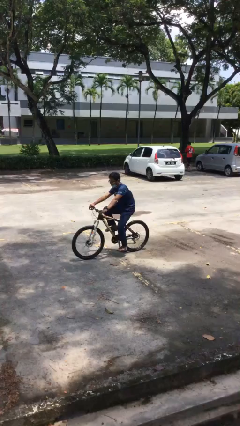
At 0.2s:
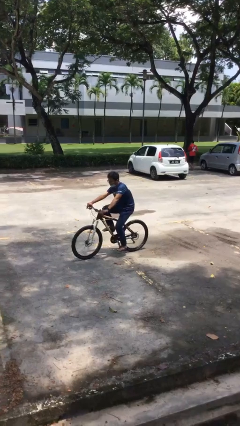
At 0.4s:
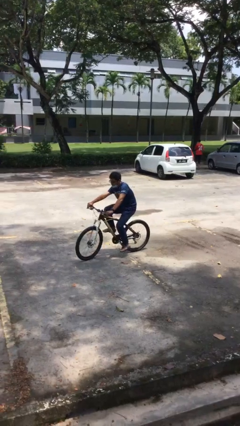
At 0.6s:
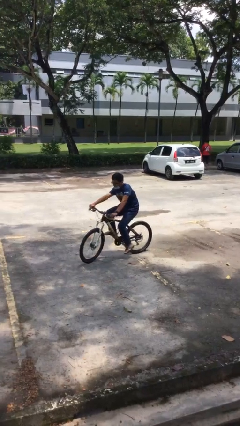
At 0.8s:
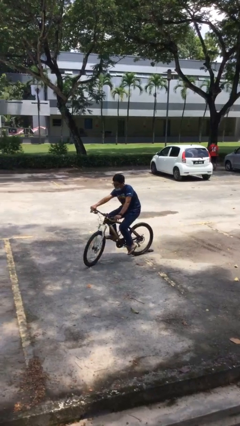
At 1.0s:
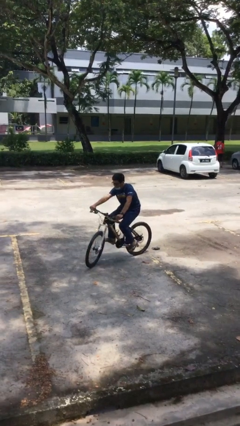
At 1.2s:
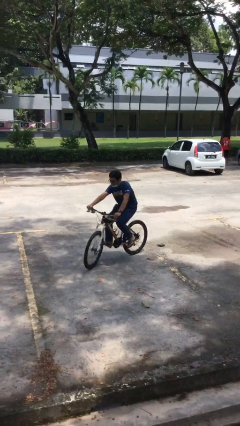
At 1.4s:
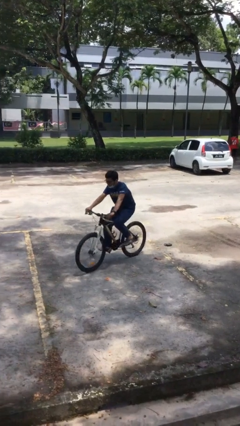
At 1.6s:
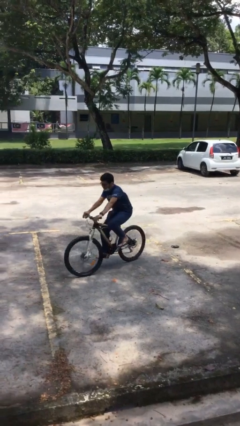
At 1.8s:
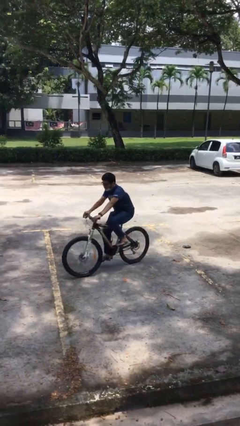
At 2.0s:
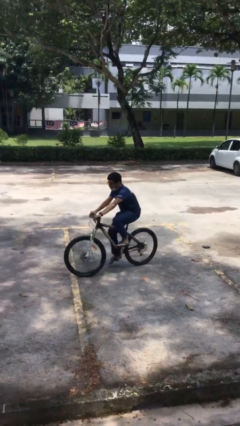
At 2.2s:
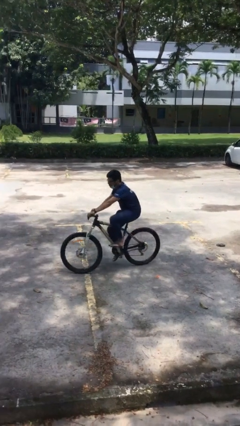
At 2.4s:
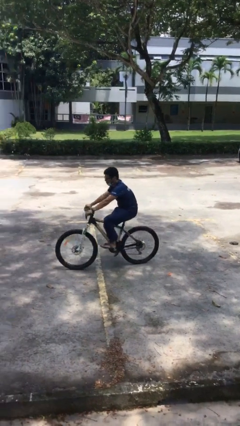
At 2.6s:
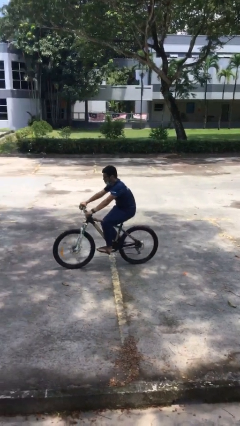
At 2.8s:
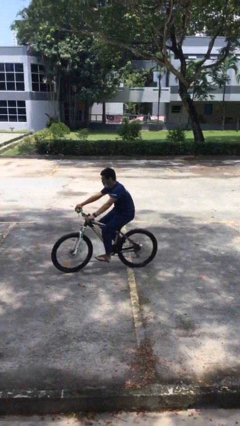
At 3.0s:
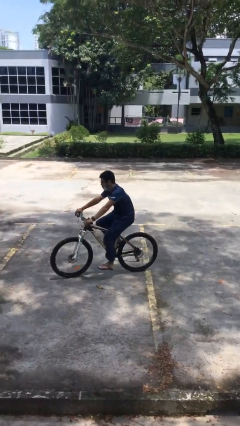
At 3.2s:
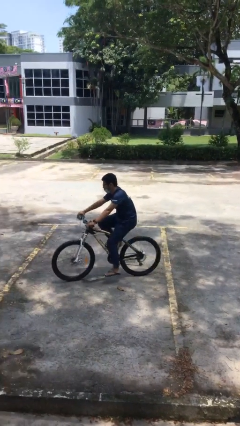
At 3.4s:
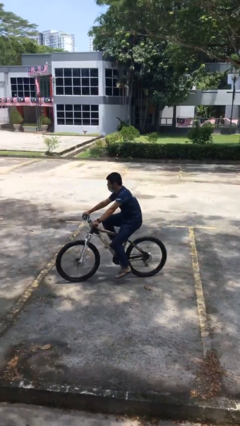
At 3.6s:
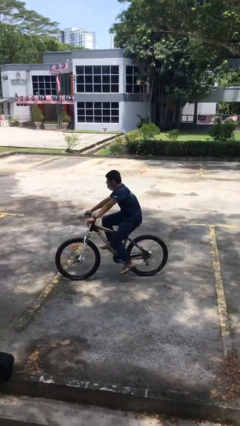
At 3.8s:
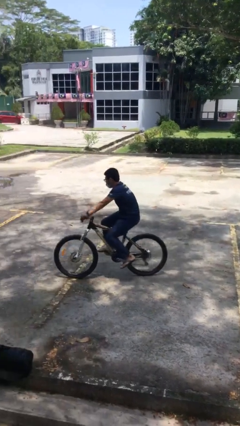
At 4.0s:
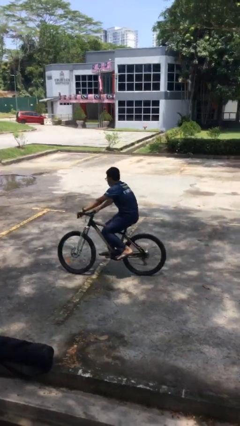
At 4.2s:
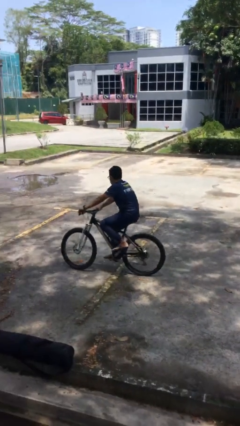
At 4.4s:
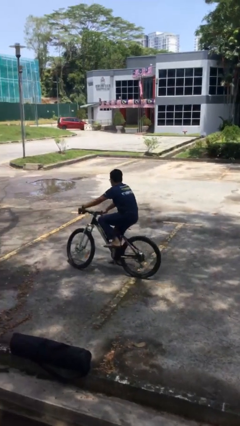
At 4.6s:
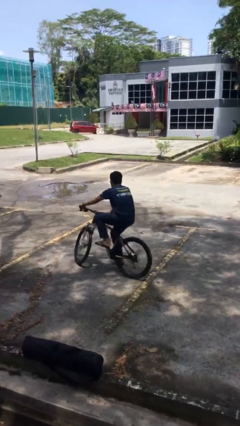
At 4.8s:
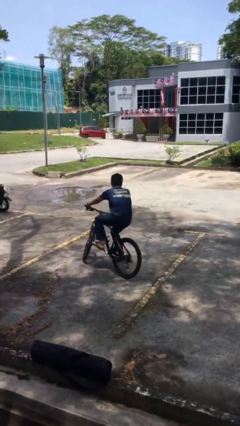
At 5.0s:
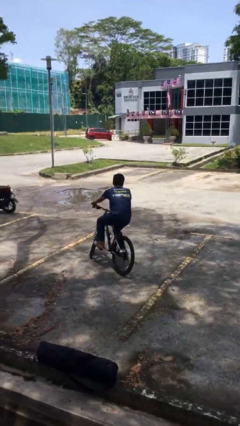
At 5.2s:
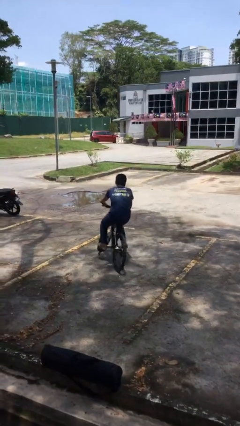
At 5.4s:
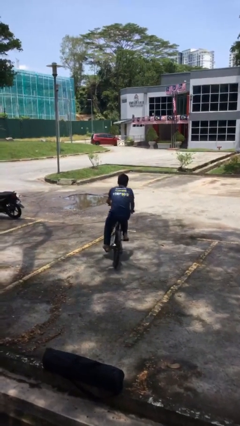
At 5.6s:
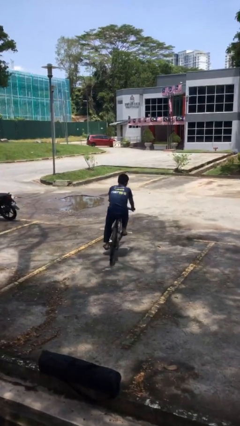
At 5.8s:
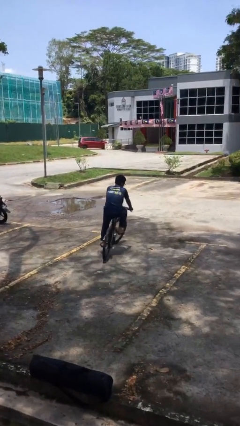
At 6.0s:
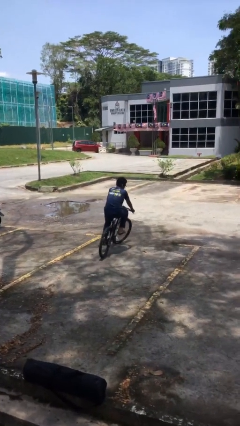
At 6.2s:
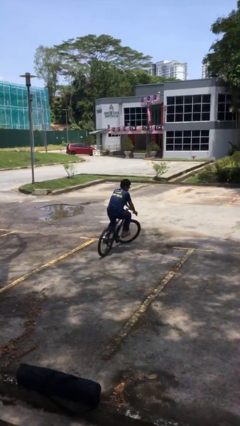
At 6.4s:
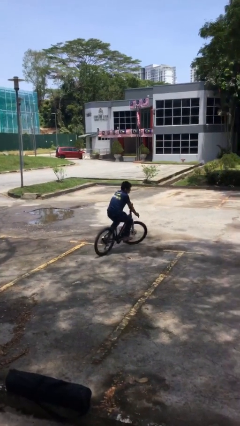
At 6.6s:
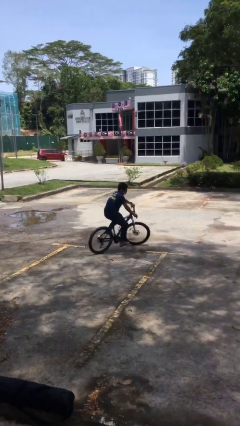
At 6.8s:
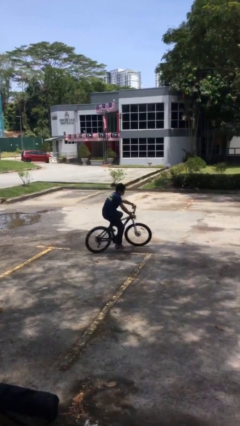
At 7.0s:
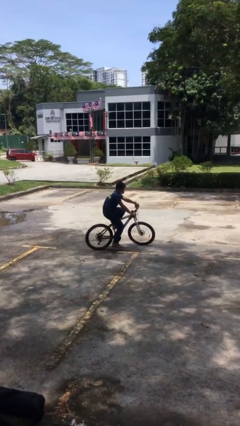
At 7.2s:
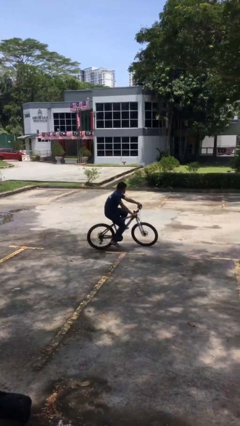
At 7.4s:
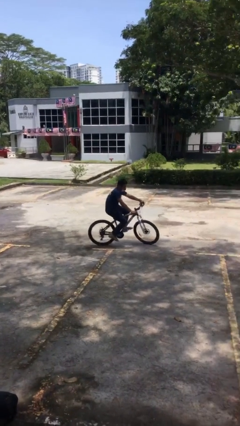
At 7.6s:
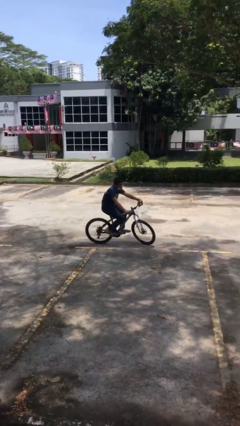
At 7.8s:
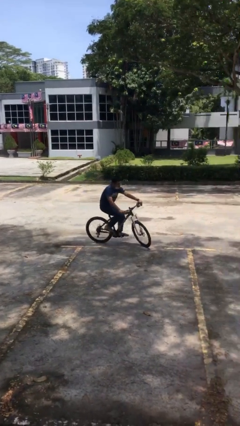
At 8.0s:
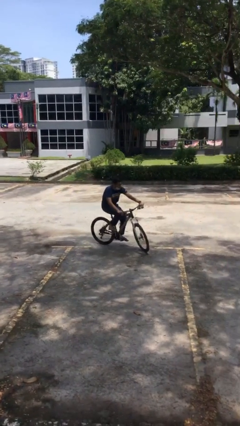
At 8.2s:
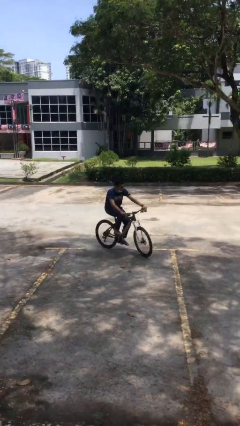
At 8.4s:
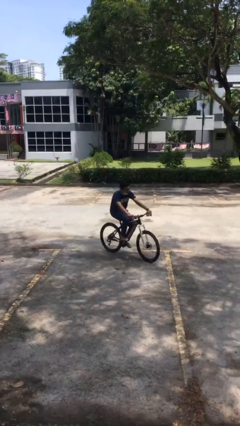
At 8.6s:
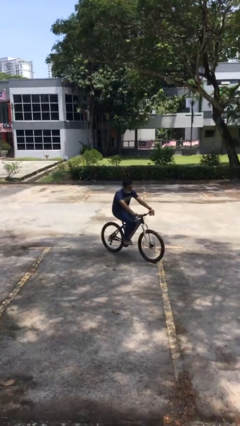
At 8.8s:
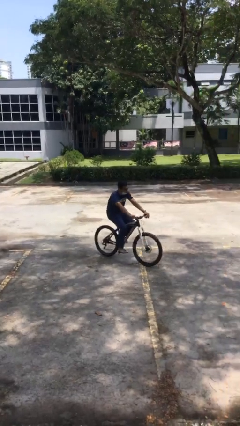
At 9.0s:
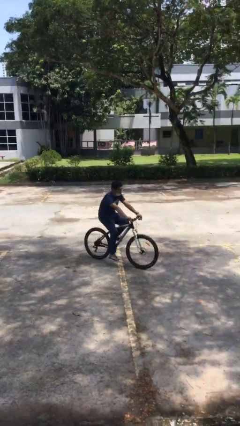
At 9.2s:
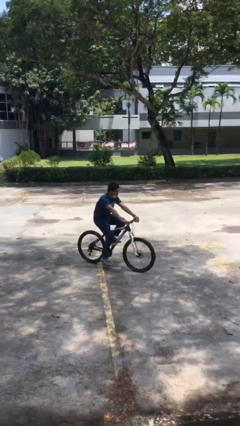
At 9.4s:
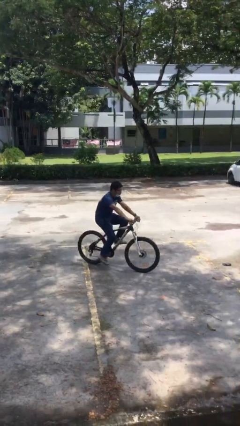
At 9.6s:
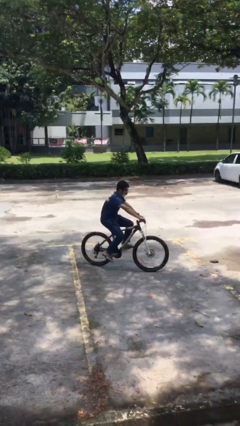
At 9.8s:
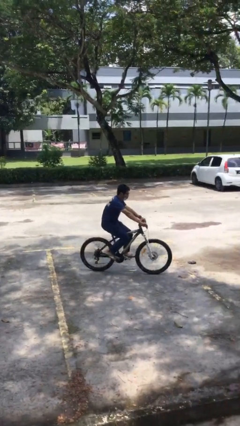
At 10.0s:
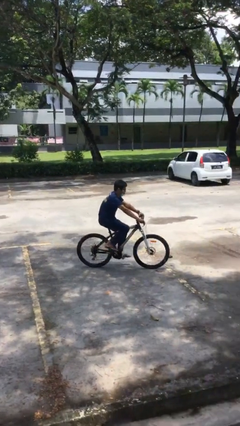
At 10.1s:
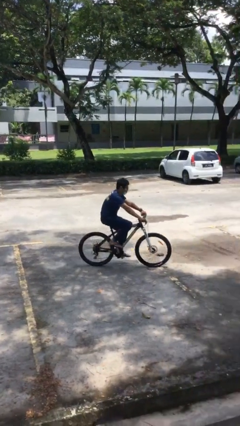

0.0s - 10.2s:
person rides bicycle

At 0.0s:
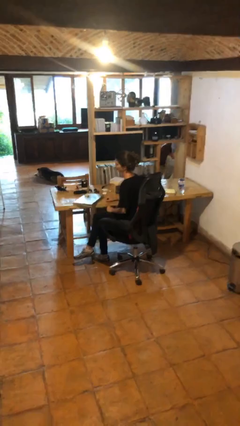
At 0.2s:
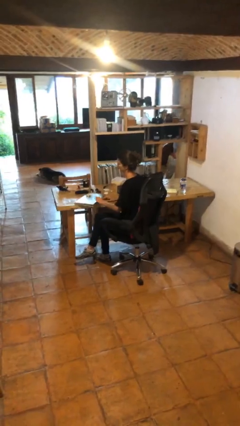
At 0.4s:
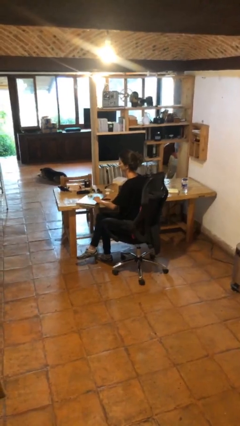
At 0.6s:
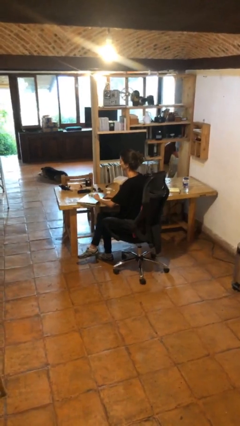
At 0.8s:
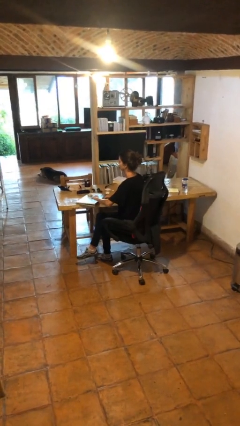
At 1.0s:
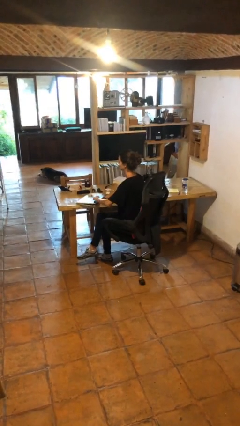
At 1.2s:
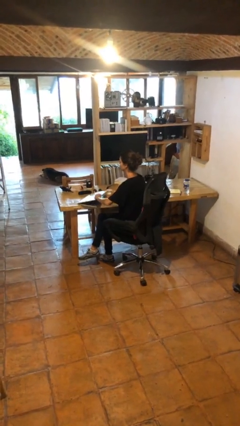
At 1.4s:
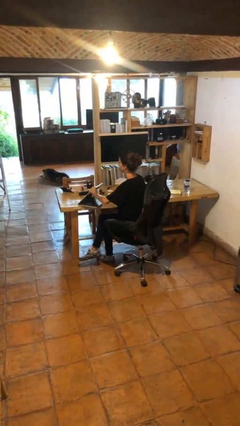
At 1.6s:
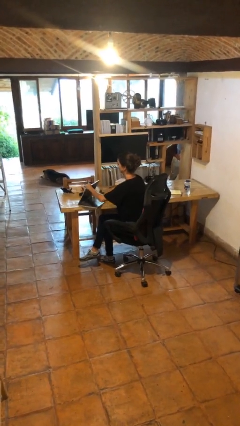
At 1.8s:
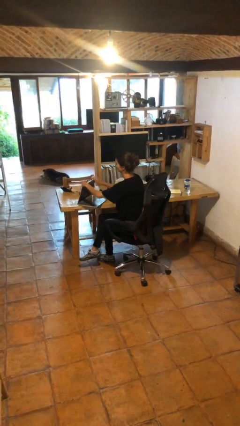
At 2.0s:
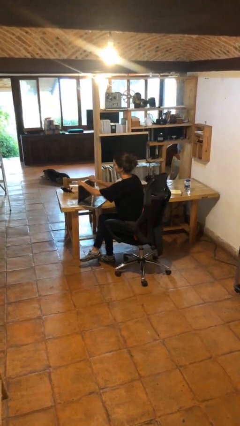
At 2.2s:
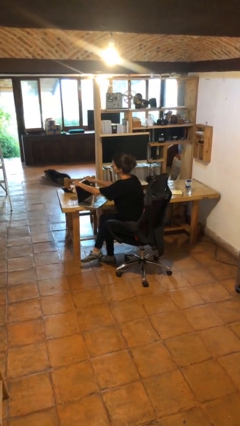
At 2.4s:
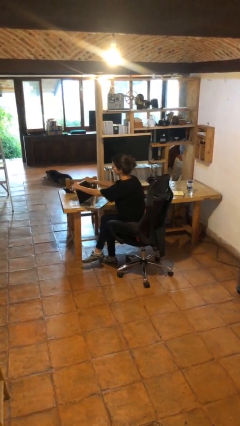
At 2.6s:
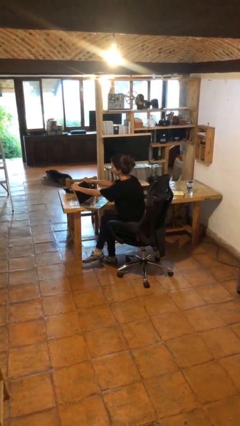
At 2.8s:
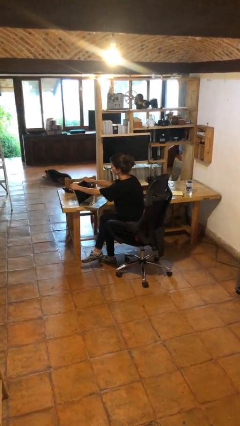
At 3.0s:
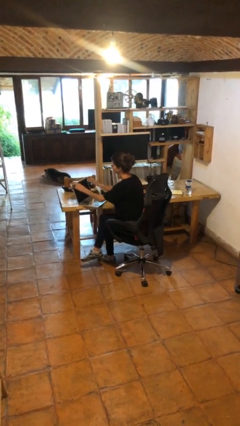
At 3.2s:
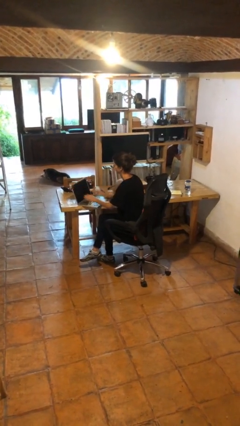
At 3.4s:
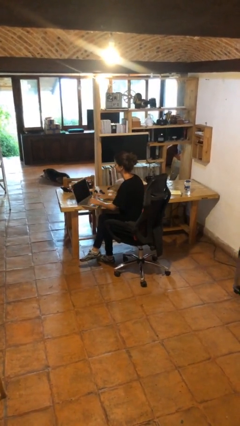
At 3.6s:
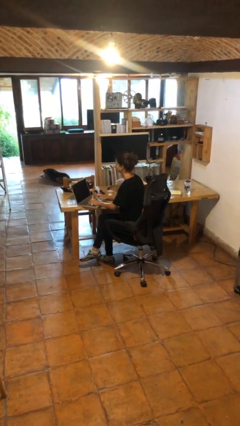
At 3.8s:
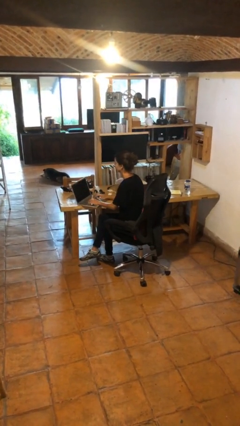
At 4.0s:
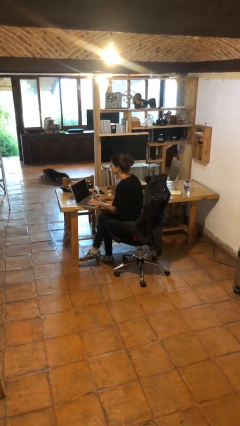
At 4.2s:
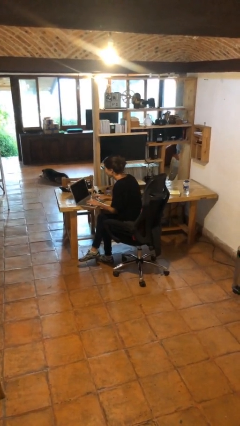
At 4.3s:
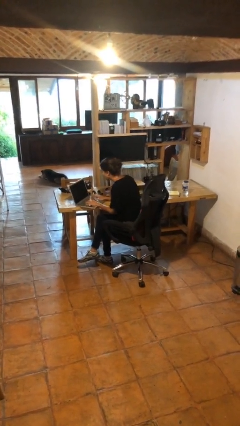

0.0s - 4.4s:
person opens laptop

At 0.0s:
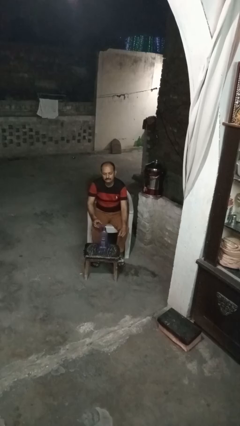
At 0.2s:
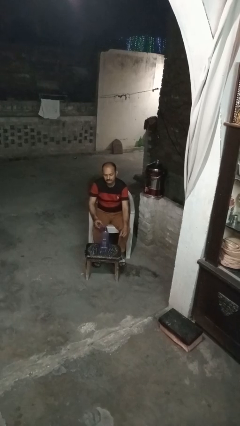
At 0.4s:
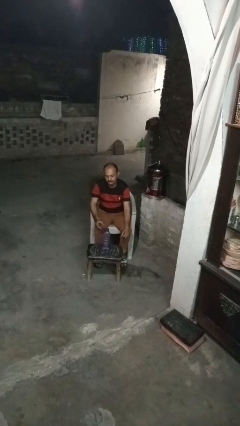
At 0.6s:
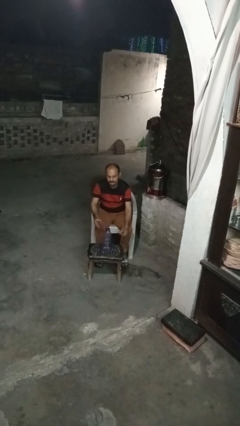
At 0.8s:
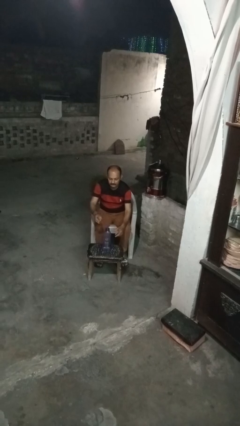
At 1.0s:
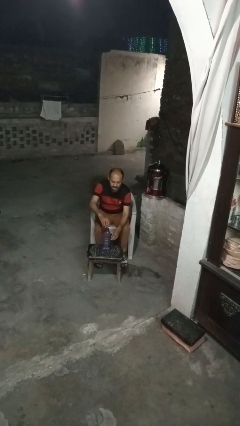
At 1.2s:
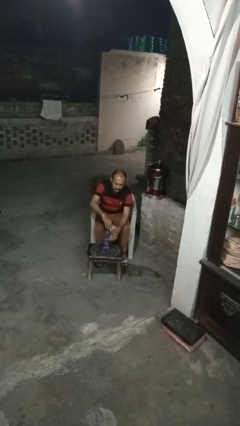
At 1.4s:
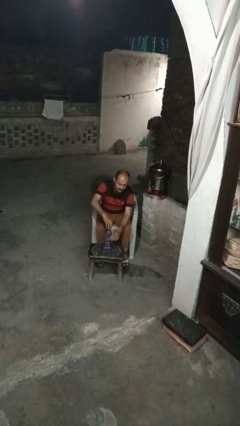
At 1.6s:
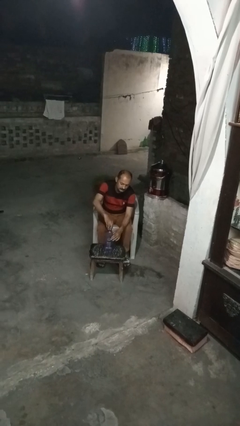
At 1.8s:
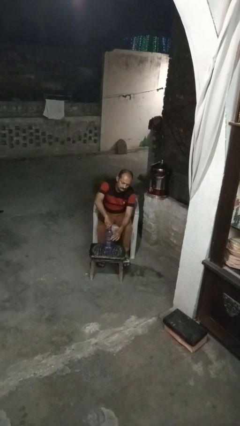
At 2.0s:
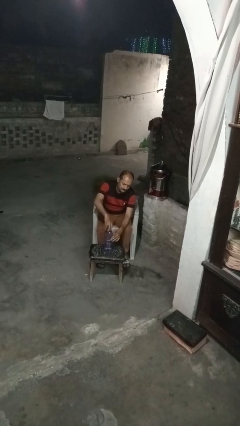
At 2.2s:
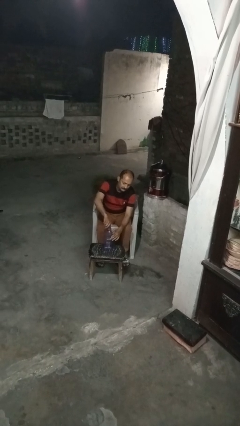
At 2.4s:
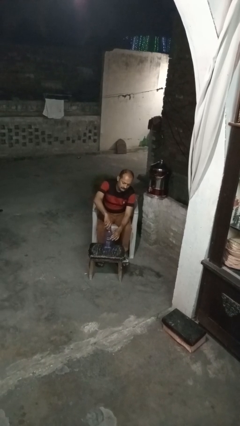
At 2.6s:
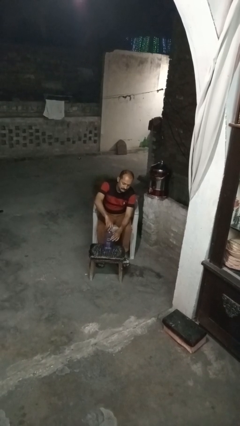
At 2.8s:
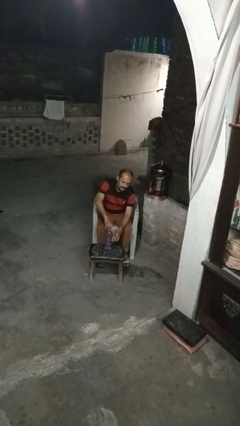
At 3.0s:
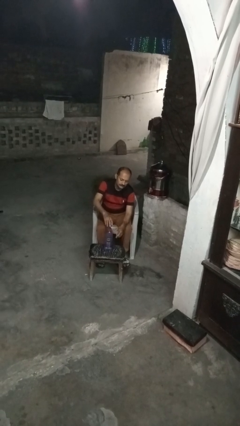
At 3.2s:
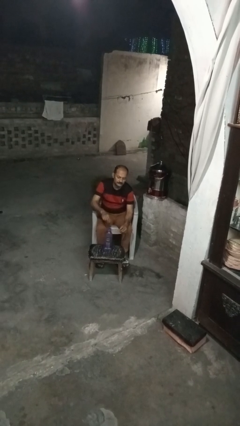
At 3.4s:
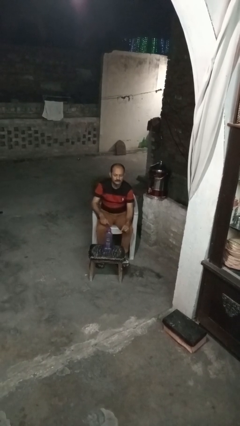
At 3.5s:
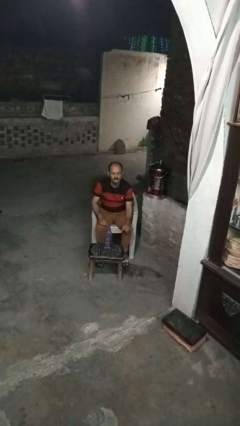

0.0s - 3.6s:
person screws lid to bottle
